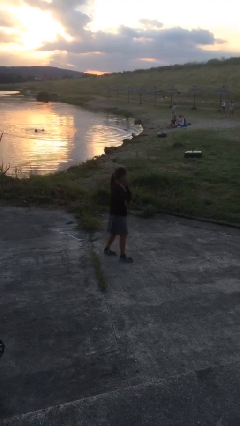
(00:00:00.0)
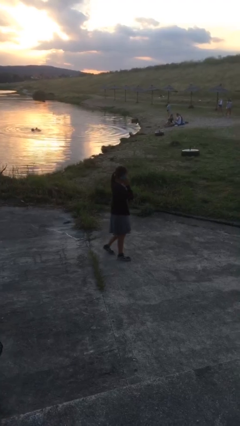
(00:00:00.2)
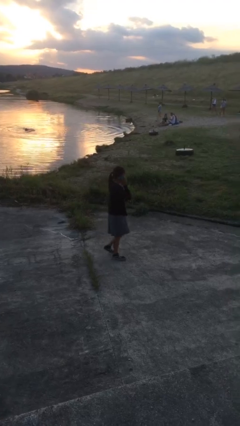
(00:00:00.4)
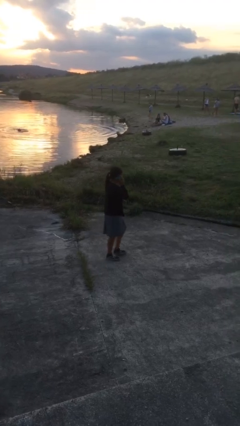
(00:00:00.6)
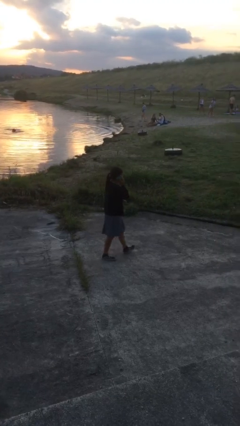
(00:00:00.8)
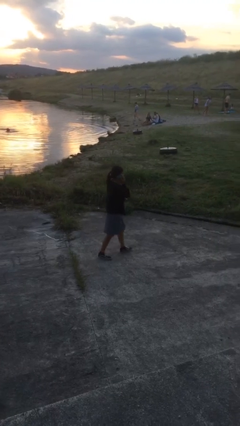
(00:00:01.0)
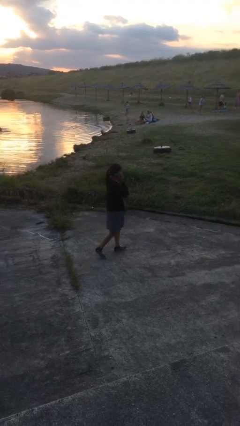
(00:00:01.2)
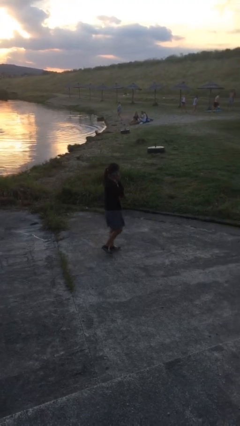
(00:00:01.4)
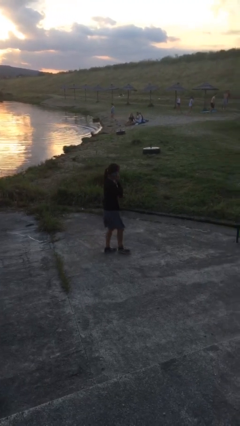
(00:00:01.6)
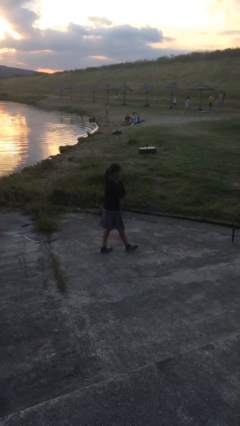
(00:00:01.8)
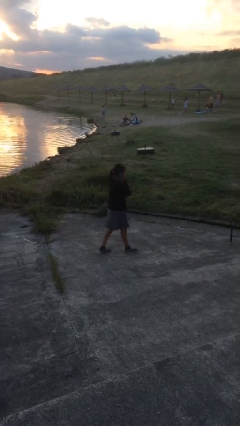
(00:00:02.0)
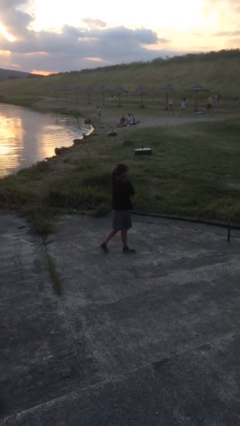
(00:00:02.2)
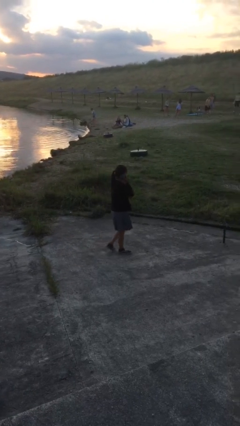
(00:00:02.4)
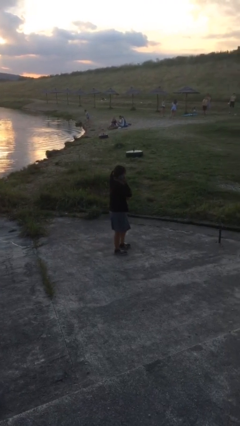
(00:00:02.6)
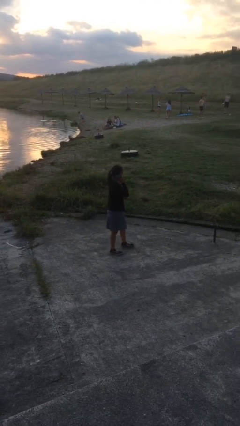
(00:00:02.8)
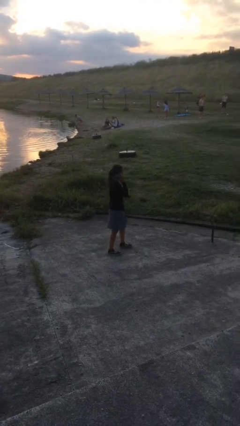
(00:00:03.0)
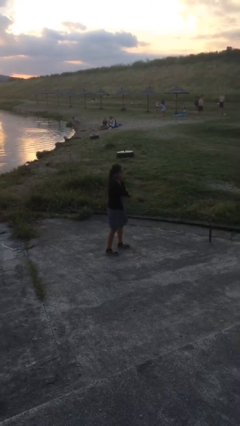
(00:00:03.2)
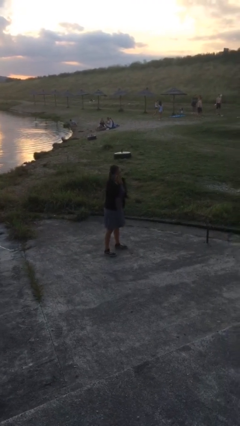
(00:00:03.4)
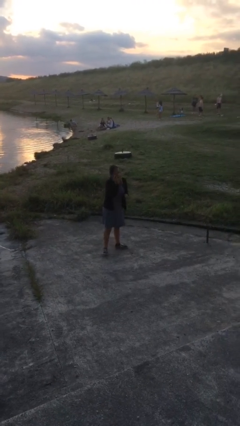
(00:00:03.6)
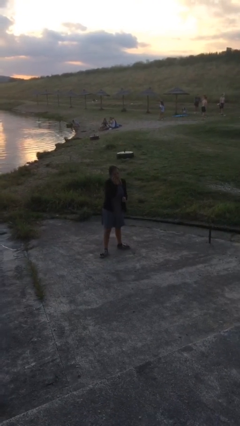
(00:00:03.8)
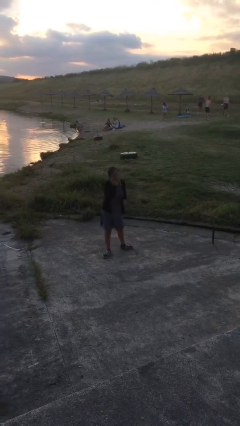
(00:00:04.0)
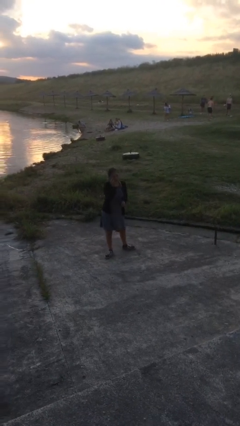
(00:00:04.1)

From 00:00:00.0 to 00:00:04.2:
person talks on phone

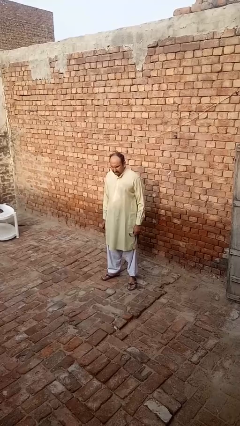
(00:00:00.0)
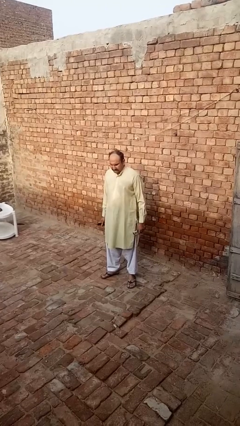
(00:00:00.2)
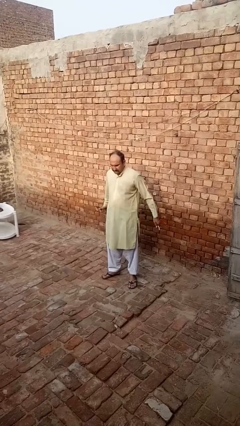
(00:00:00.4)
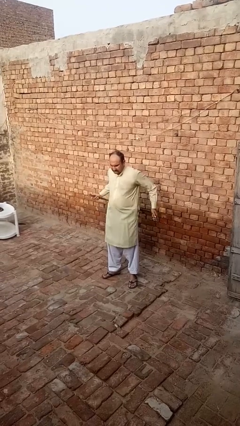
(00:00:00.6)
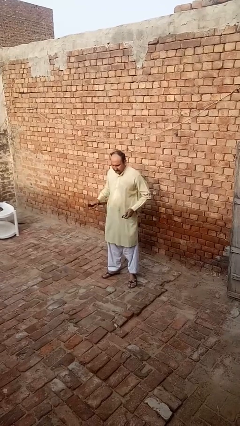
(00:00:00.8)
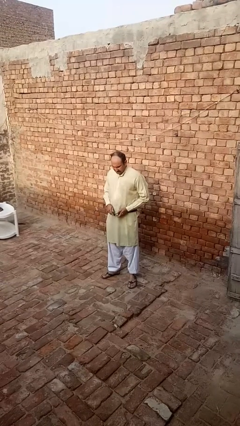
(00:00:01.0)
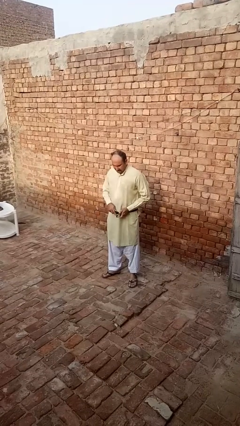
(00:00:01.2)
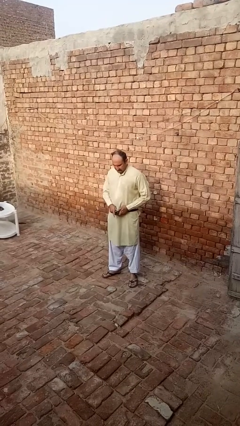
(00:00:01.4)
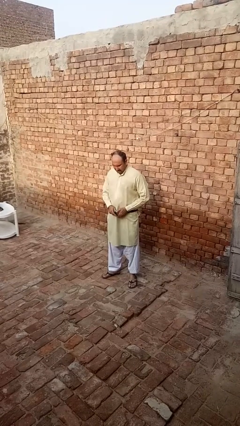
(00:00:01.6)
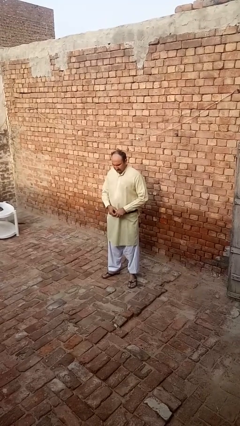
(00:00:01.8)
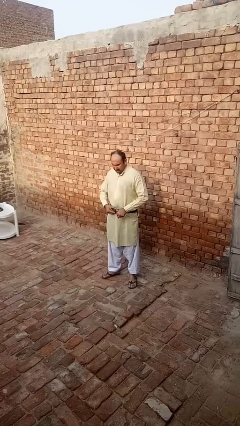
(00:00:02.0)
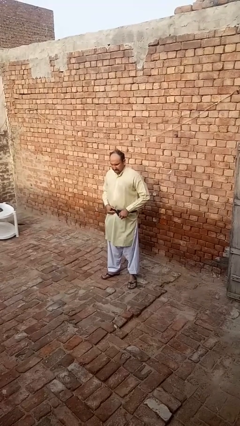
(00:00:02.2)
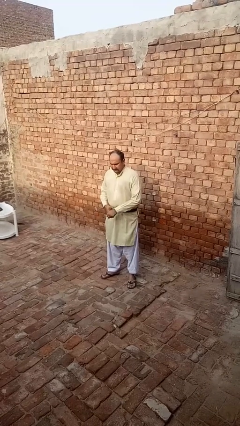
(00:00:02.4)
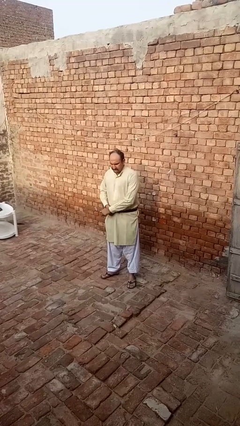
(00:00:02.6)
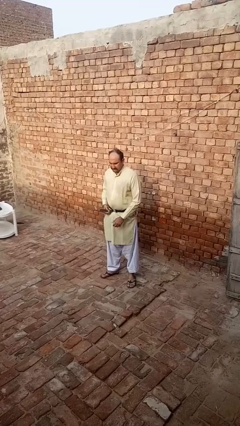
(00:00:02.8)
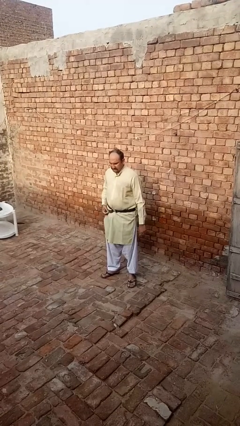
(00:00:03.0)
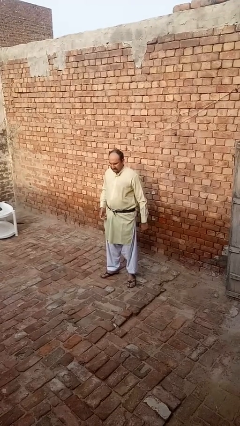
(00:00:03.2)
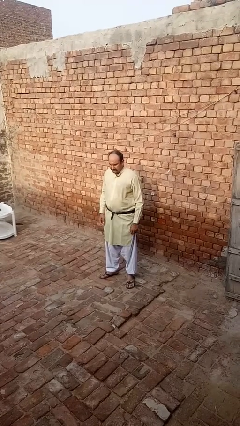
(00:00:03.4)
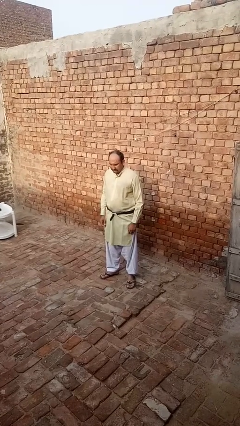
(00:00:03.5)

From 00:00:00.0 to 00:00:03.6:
person puts on belt

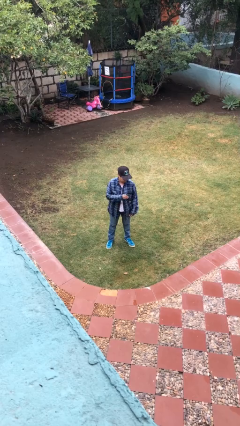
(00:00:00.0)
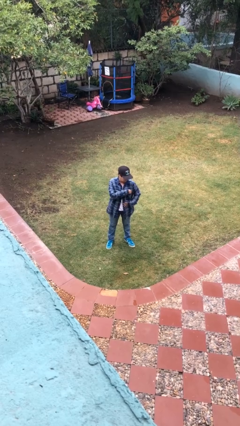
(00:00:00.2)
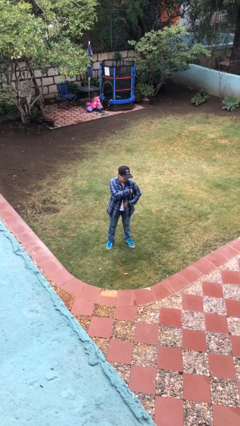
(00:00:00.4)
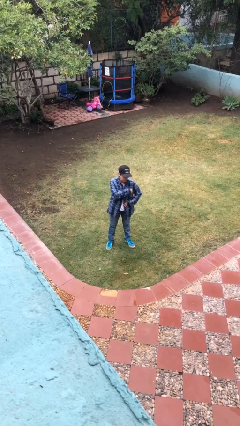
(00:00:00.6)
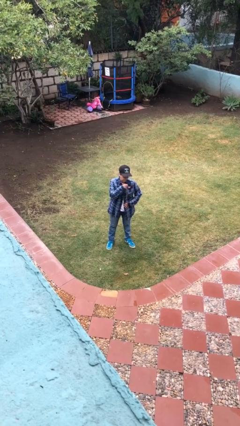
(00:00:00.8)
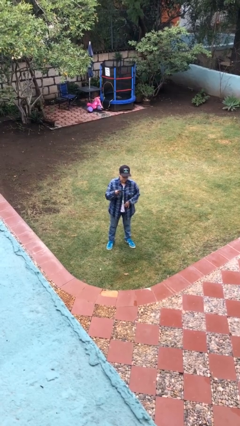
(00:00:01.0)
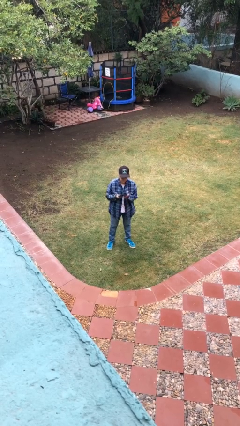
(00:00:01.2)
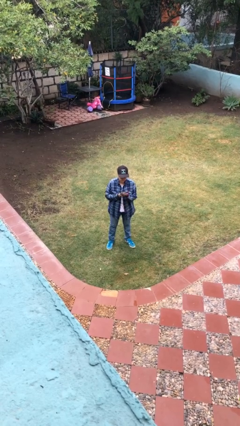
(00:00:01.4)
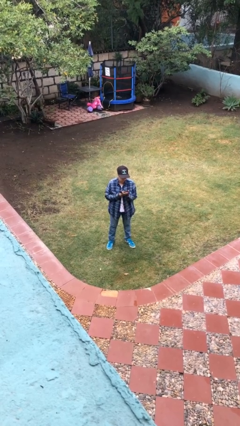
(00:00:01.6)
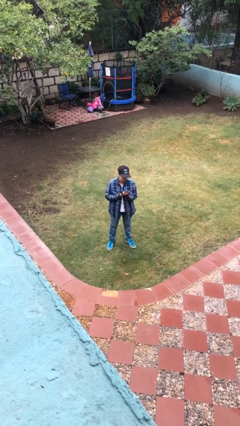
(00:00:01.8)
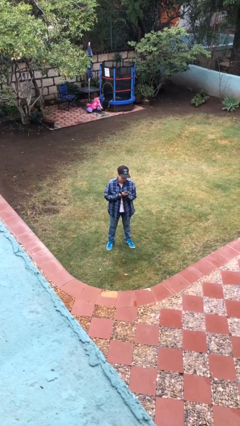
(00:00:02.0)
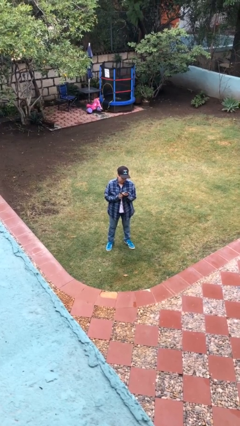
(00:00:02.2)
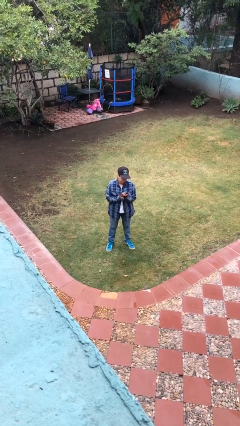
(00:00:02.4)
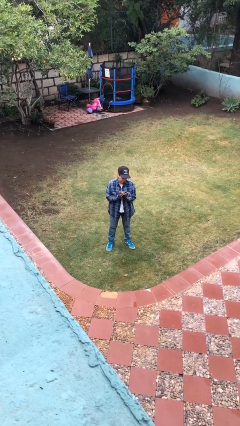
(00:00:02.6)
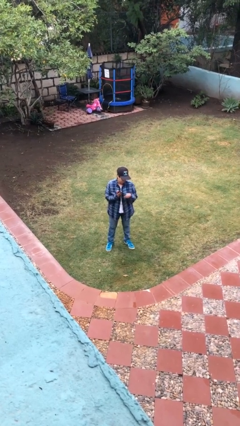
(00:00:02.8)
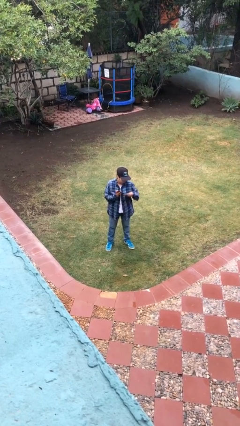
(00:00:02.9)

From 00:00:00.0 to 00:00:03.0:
person takes phone from pocket

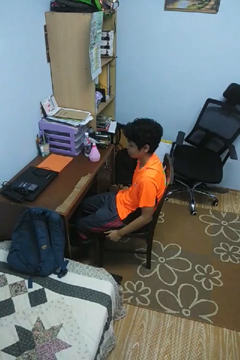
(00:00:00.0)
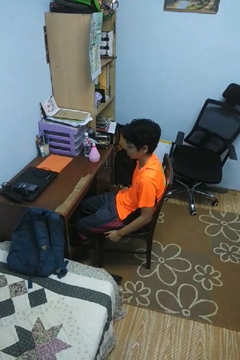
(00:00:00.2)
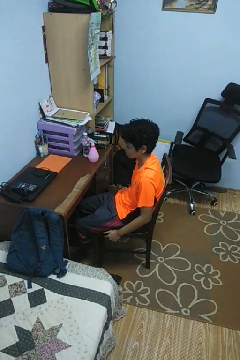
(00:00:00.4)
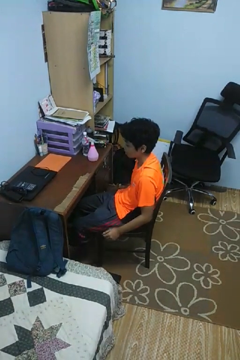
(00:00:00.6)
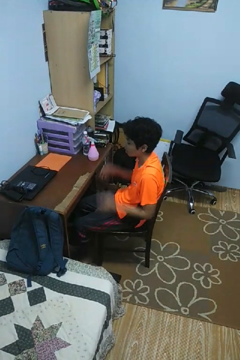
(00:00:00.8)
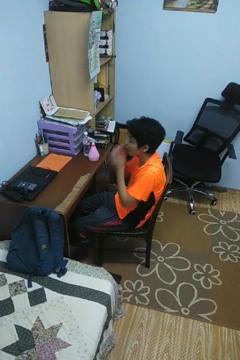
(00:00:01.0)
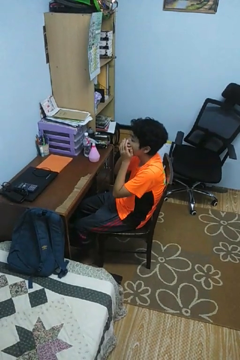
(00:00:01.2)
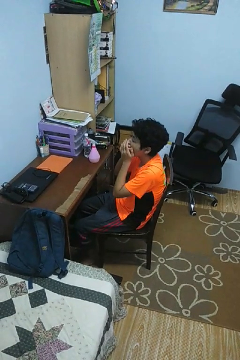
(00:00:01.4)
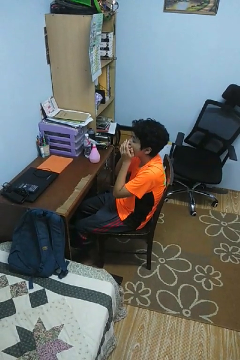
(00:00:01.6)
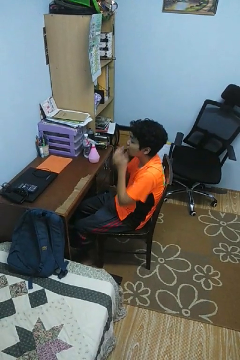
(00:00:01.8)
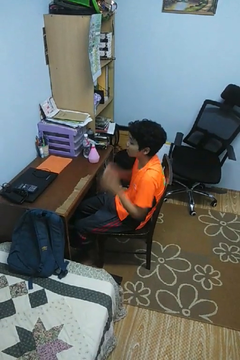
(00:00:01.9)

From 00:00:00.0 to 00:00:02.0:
person yawns

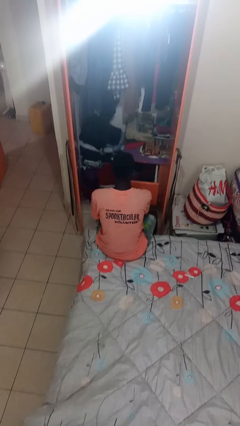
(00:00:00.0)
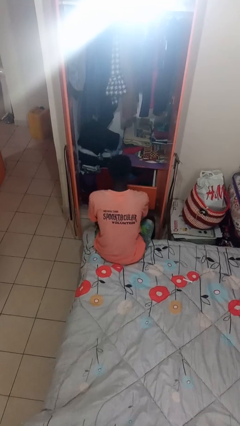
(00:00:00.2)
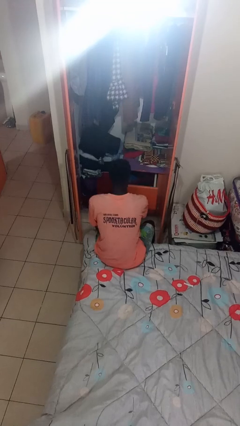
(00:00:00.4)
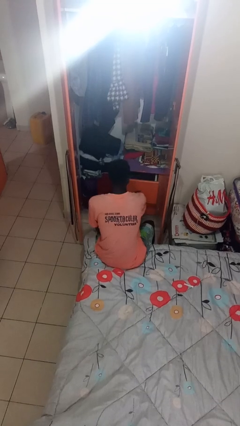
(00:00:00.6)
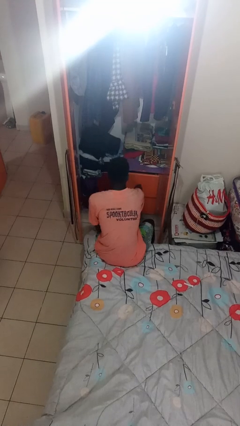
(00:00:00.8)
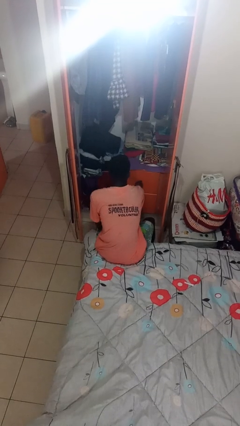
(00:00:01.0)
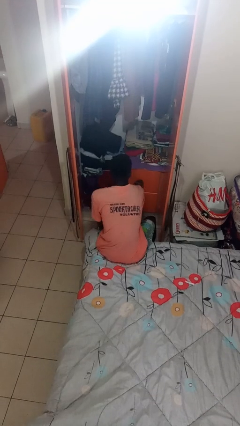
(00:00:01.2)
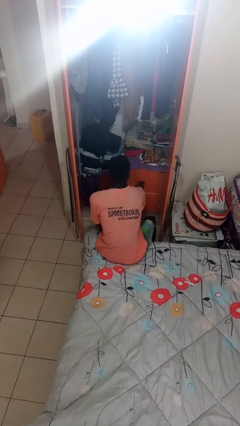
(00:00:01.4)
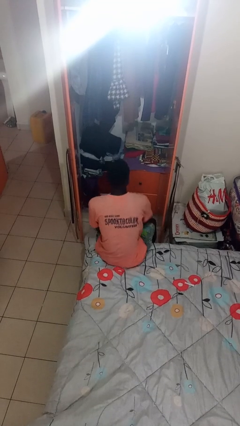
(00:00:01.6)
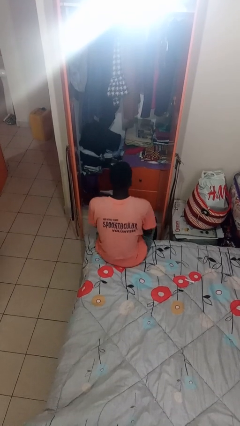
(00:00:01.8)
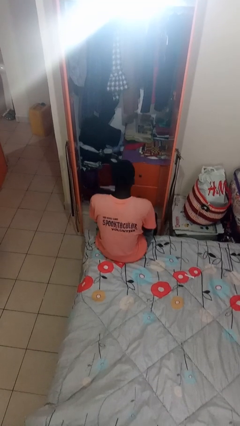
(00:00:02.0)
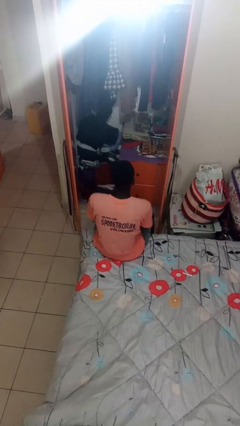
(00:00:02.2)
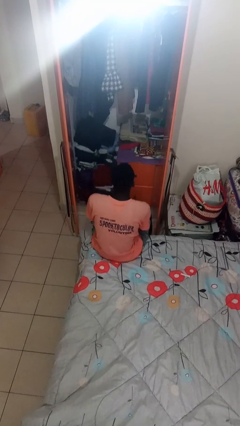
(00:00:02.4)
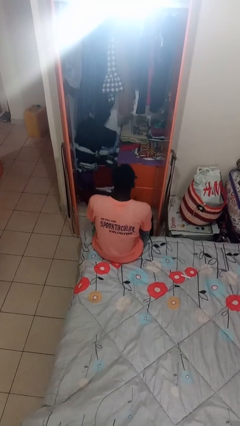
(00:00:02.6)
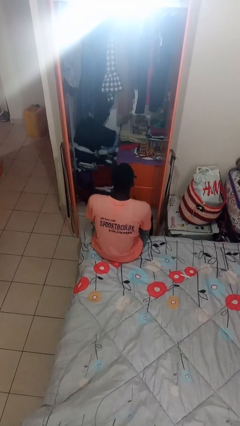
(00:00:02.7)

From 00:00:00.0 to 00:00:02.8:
person closes dresser drawer

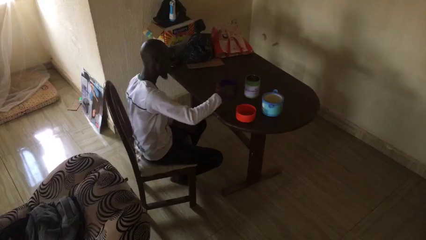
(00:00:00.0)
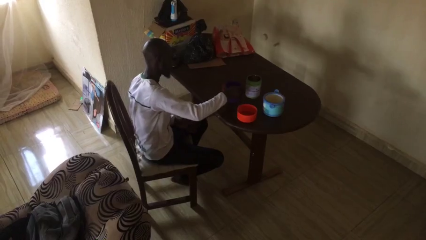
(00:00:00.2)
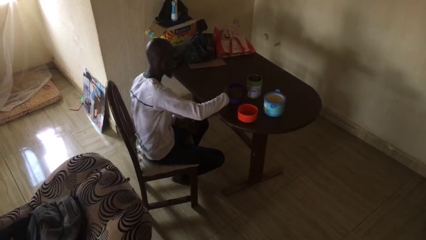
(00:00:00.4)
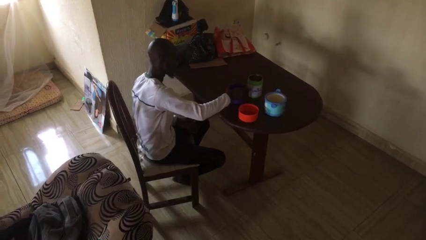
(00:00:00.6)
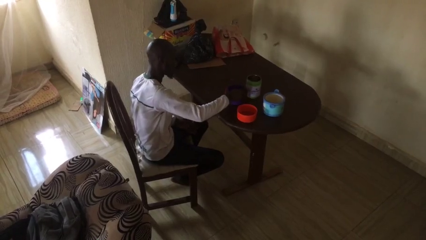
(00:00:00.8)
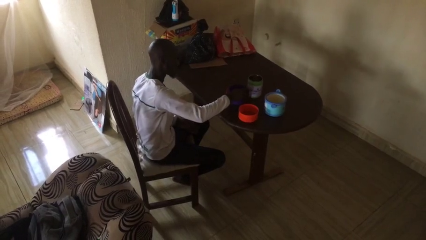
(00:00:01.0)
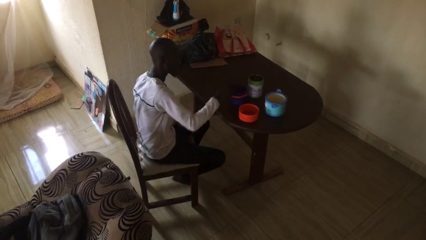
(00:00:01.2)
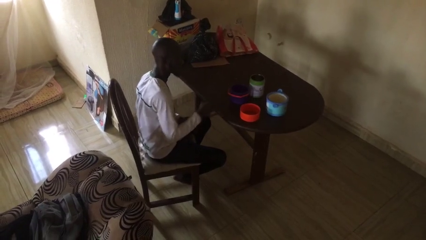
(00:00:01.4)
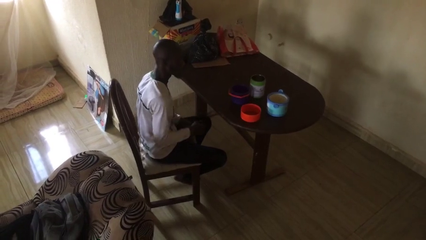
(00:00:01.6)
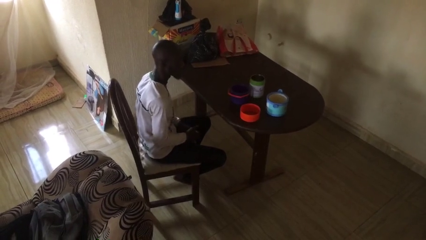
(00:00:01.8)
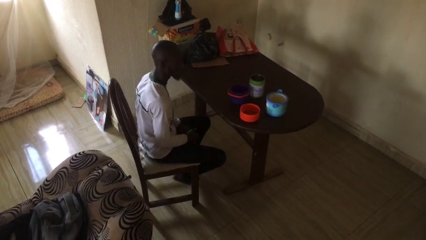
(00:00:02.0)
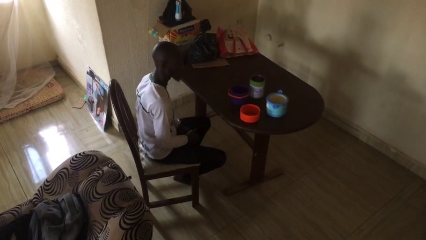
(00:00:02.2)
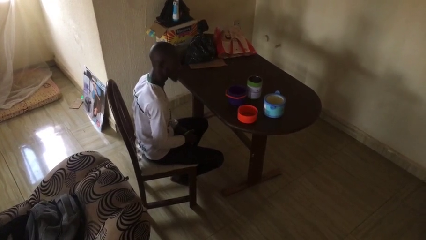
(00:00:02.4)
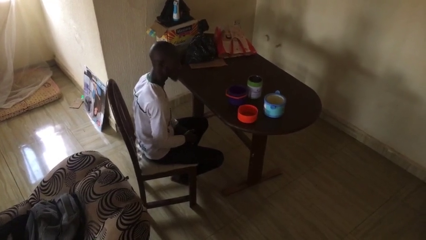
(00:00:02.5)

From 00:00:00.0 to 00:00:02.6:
person sets table
